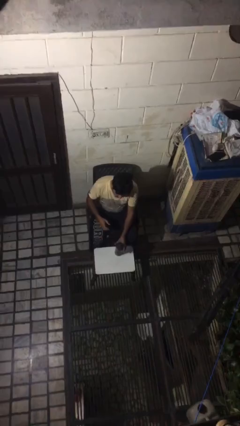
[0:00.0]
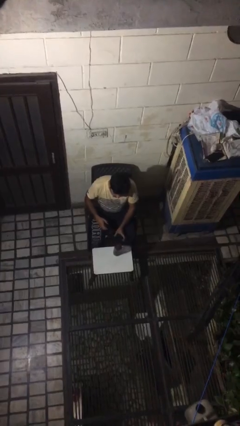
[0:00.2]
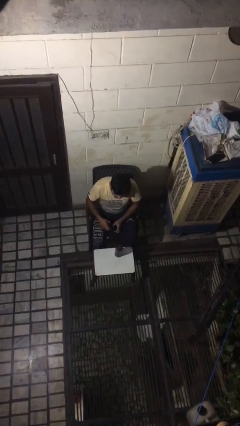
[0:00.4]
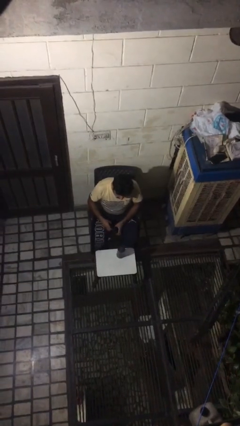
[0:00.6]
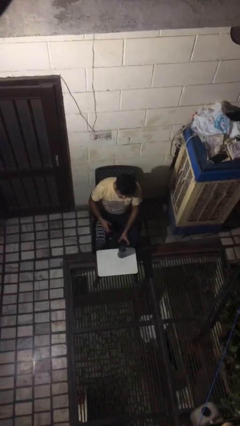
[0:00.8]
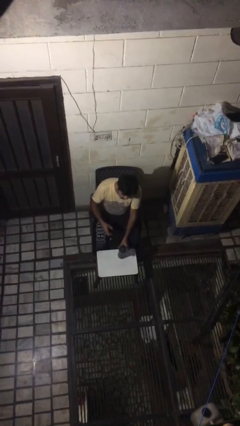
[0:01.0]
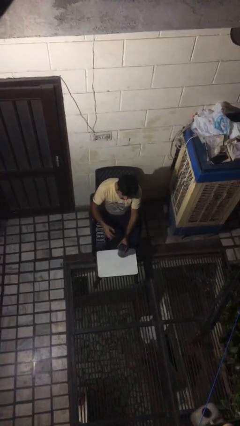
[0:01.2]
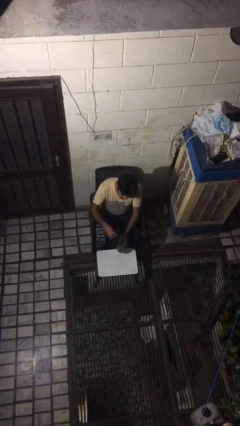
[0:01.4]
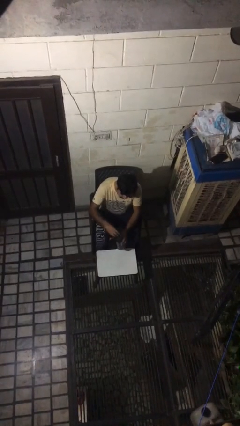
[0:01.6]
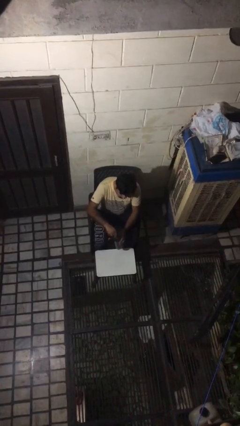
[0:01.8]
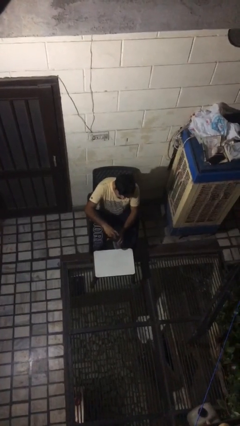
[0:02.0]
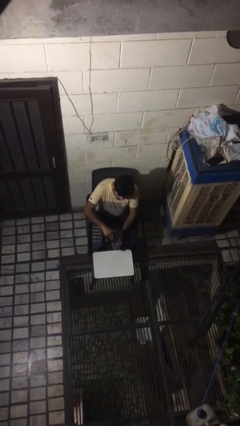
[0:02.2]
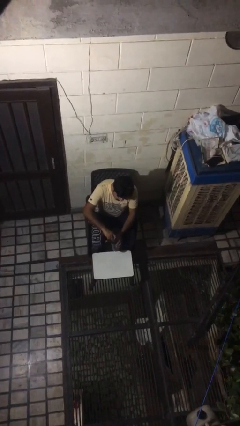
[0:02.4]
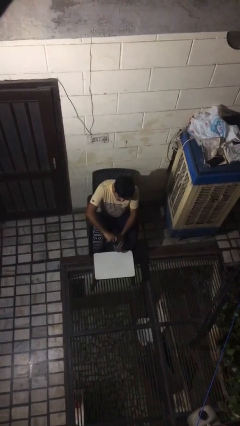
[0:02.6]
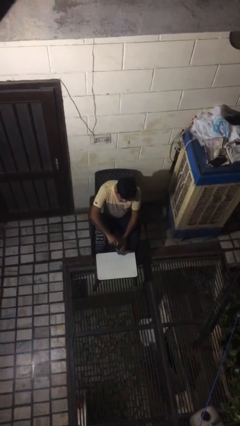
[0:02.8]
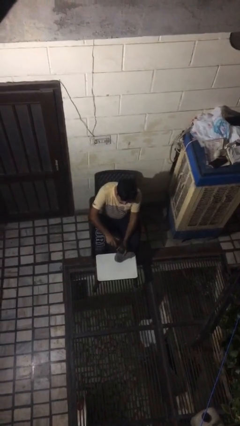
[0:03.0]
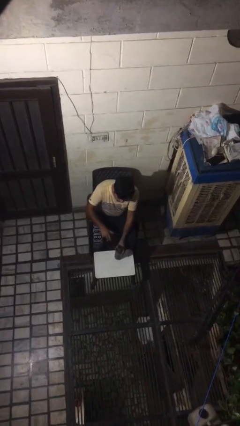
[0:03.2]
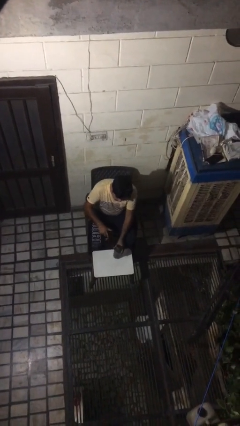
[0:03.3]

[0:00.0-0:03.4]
person screws lid to bottle

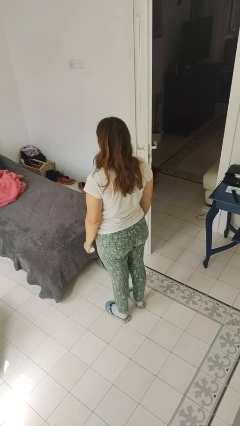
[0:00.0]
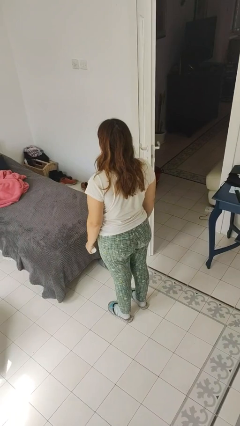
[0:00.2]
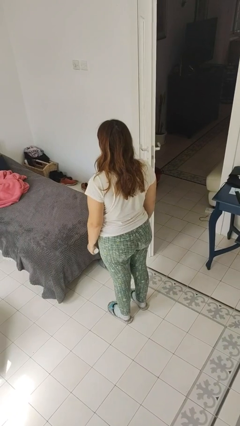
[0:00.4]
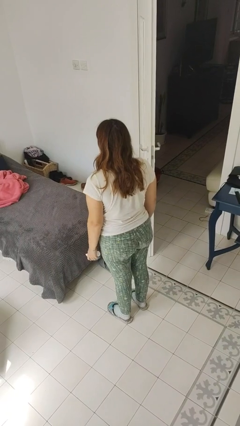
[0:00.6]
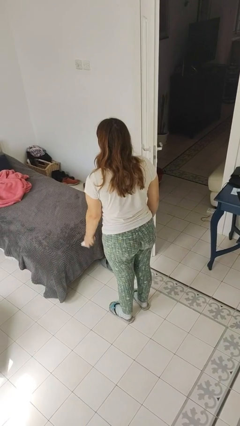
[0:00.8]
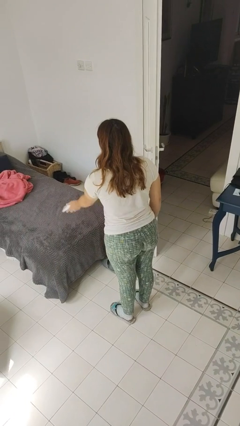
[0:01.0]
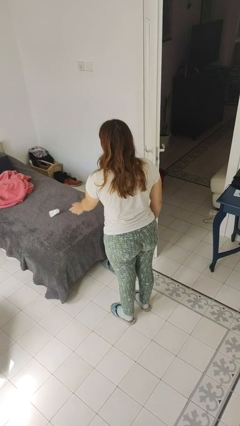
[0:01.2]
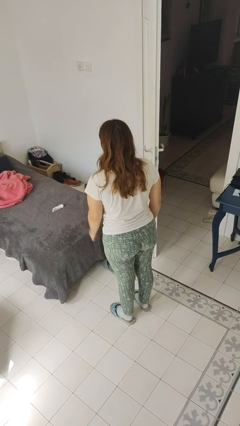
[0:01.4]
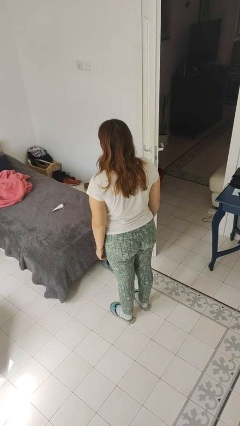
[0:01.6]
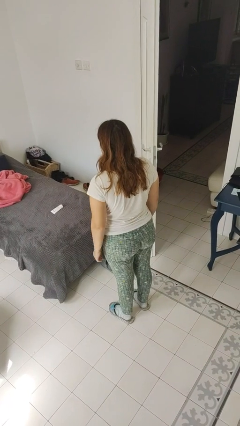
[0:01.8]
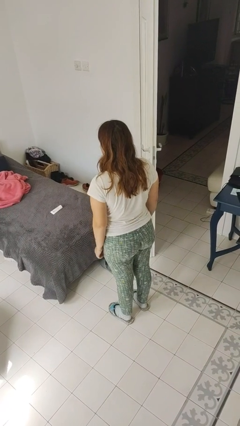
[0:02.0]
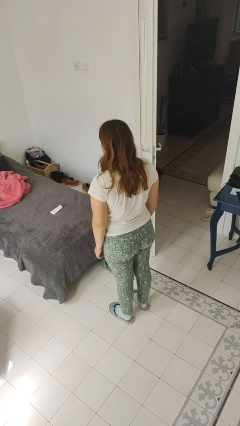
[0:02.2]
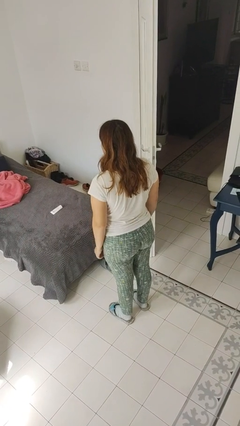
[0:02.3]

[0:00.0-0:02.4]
person throws object on bed

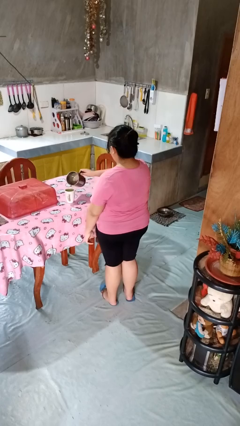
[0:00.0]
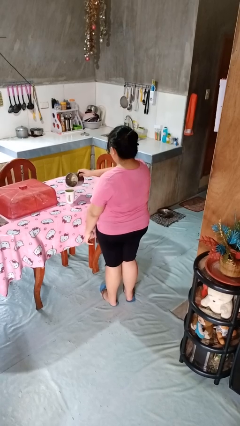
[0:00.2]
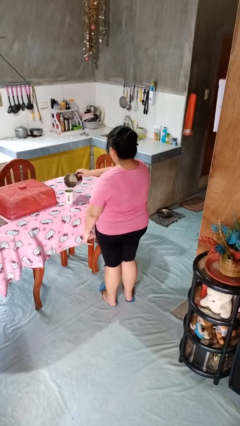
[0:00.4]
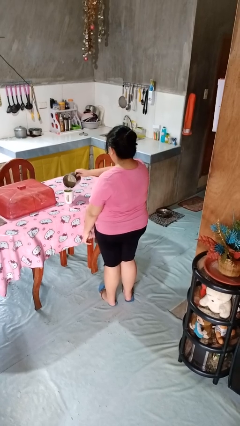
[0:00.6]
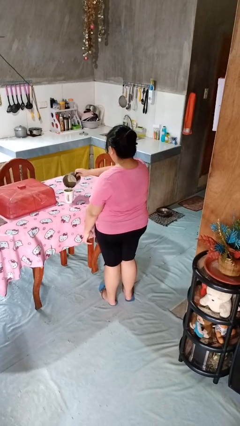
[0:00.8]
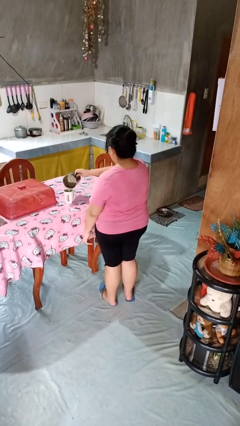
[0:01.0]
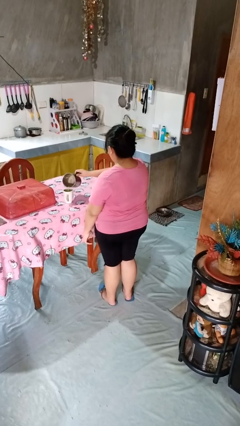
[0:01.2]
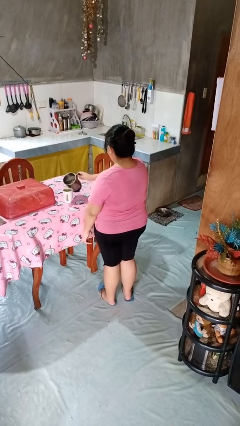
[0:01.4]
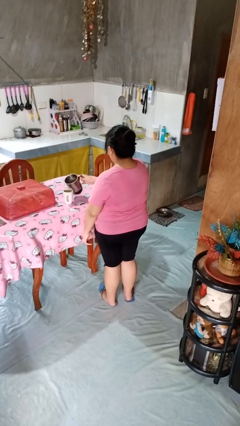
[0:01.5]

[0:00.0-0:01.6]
person pours coffee into mug

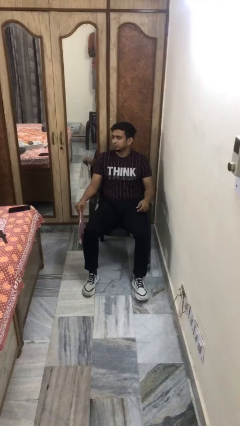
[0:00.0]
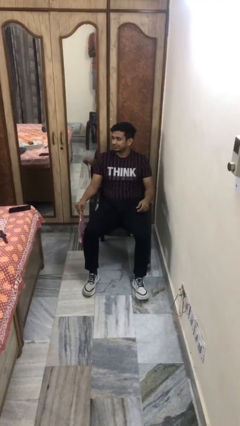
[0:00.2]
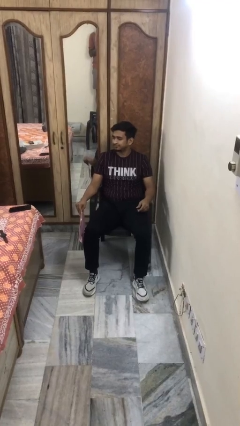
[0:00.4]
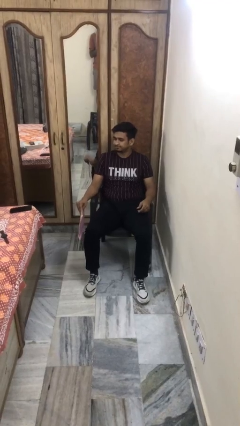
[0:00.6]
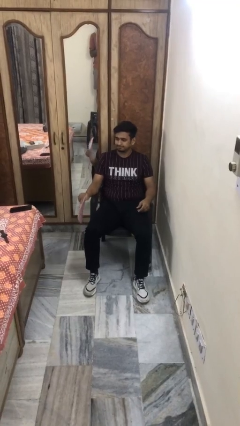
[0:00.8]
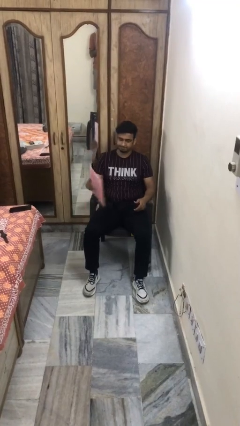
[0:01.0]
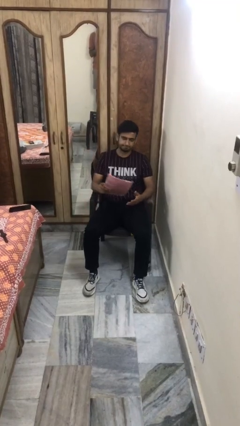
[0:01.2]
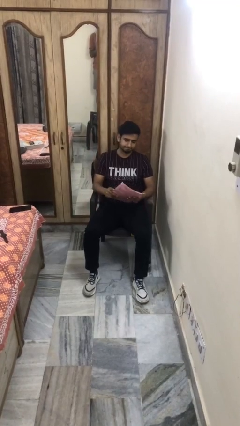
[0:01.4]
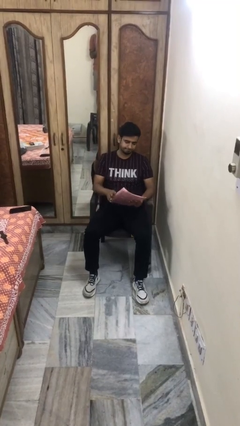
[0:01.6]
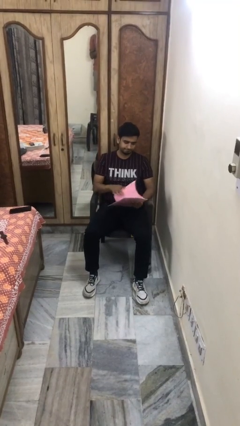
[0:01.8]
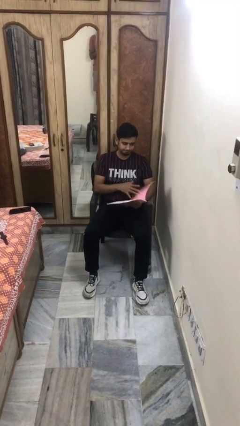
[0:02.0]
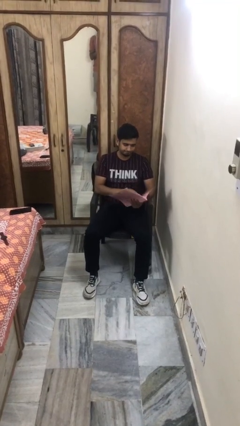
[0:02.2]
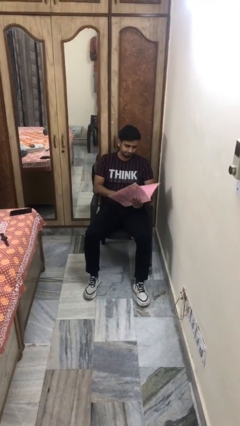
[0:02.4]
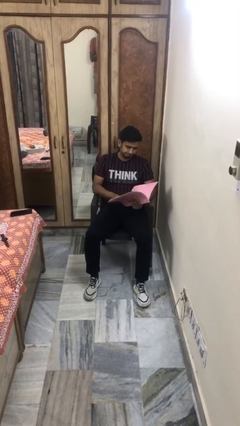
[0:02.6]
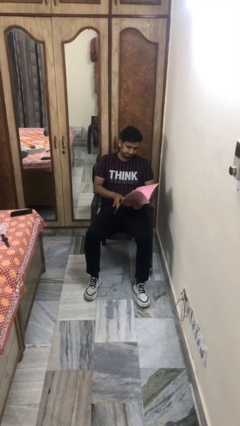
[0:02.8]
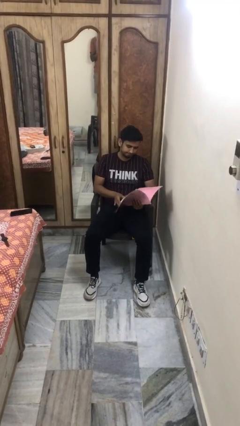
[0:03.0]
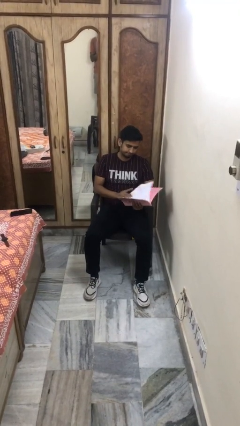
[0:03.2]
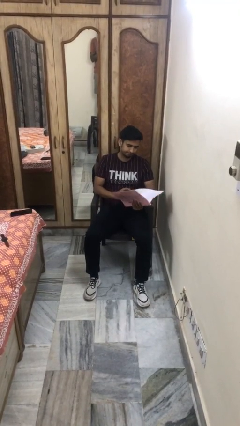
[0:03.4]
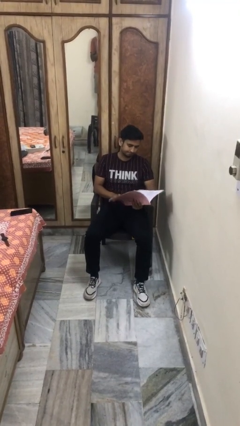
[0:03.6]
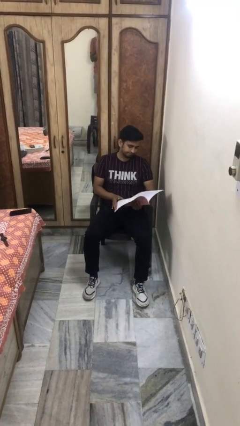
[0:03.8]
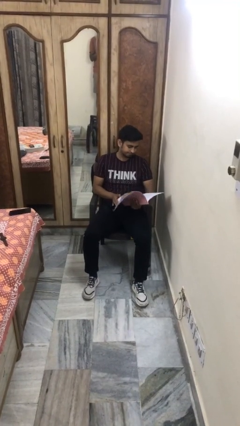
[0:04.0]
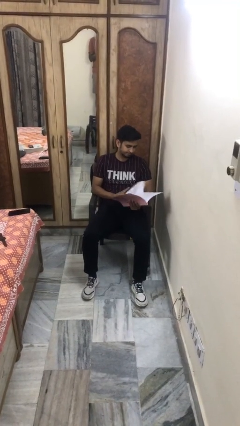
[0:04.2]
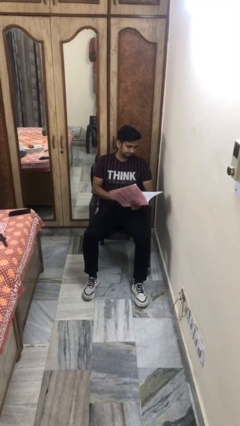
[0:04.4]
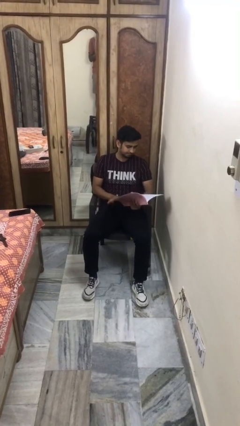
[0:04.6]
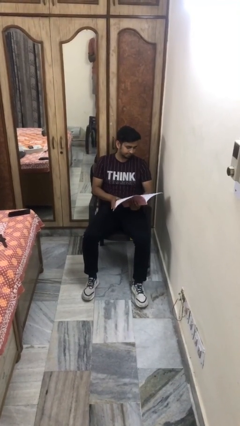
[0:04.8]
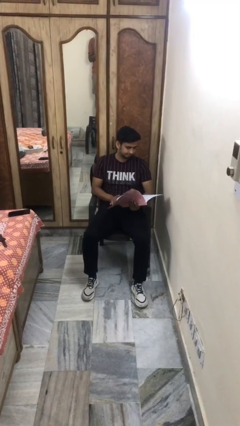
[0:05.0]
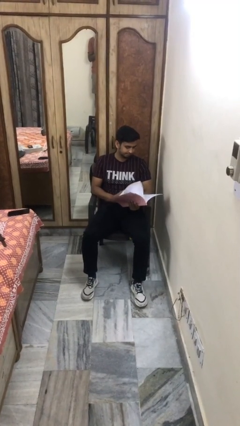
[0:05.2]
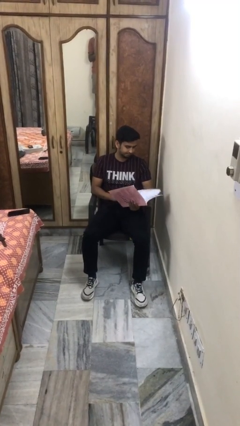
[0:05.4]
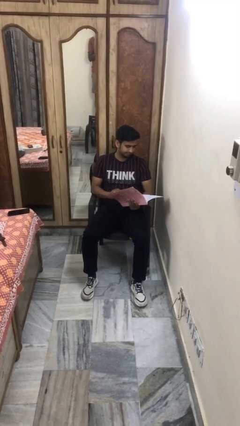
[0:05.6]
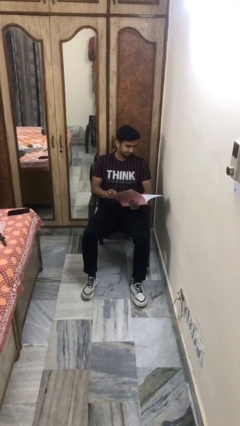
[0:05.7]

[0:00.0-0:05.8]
person reads magazine

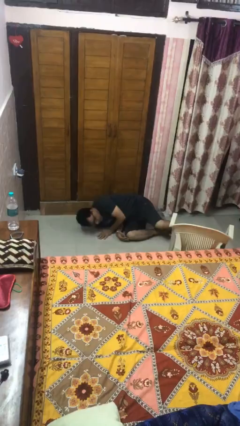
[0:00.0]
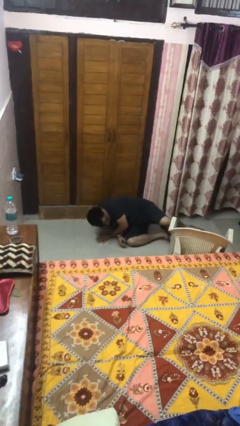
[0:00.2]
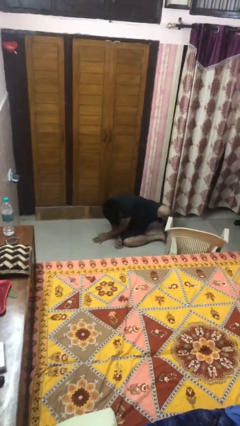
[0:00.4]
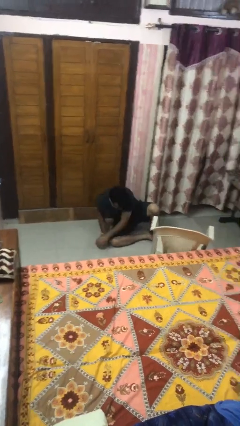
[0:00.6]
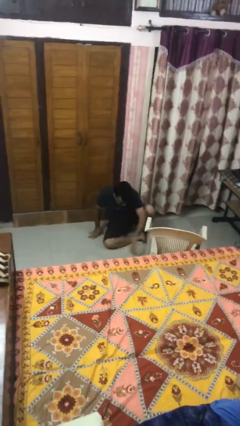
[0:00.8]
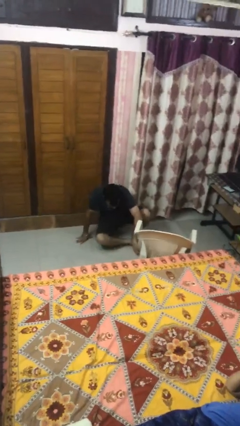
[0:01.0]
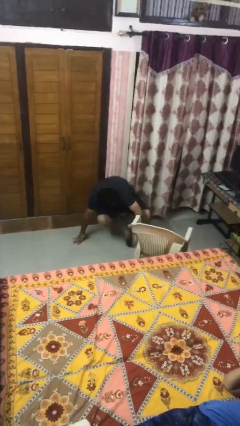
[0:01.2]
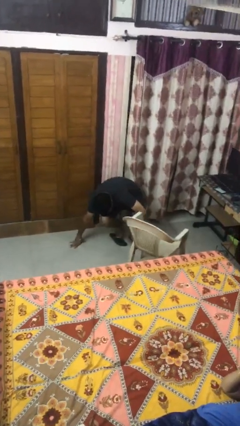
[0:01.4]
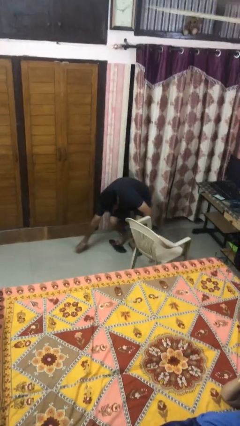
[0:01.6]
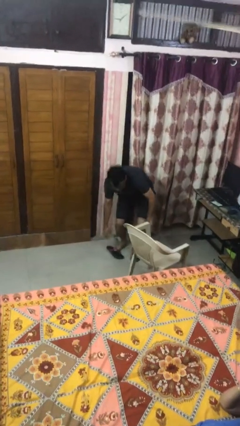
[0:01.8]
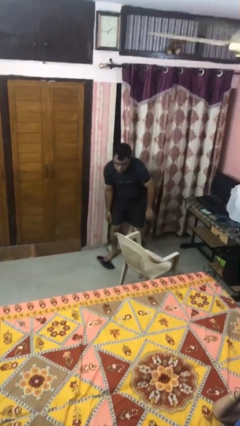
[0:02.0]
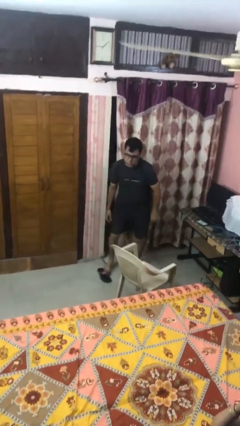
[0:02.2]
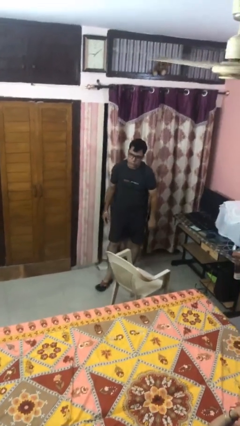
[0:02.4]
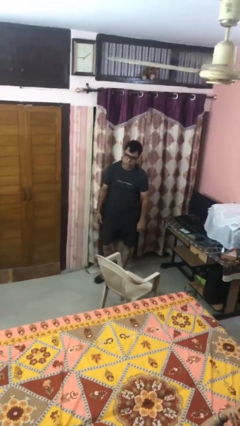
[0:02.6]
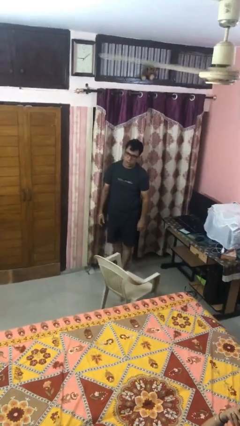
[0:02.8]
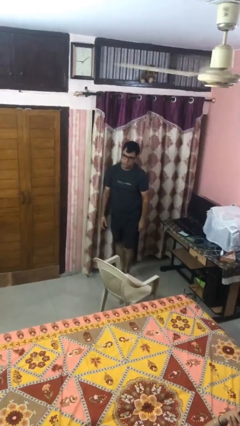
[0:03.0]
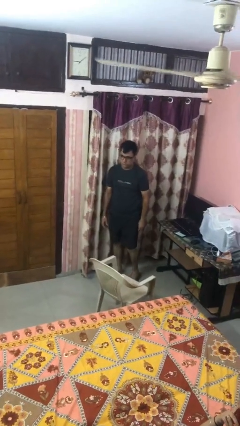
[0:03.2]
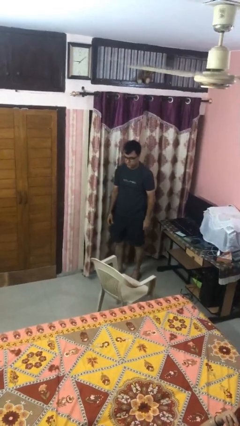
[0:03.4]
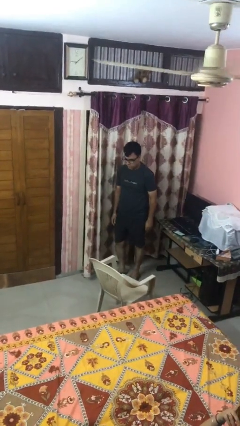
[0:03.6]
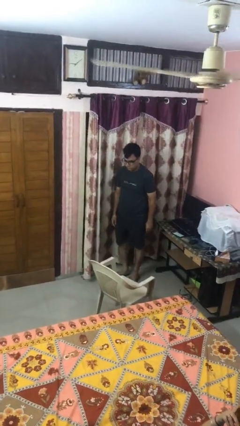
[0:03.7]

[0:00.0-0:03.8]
person stands up from floor

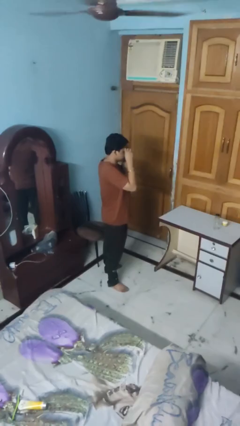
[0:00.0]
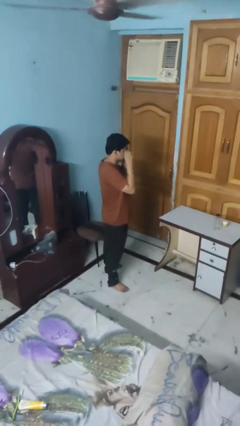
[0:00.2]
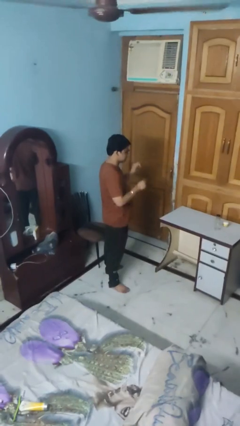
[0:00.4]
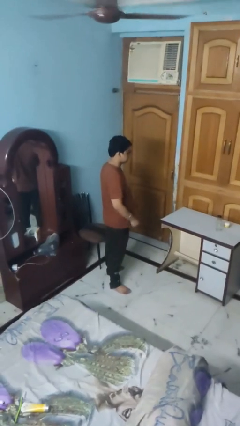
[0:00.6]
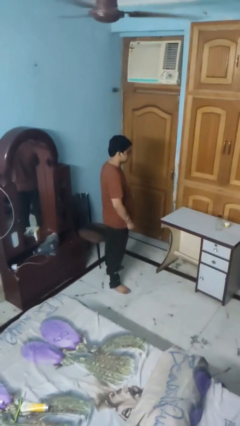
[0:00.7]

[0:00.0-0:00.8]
person puts on sunglasses
